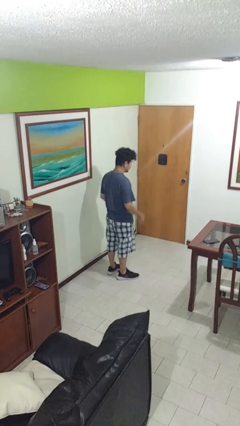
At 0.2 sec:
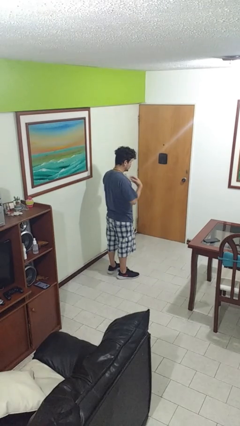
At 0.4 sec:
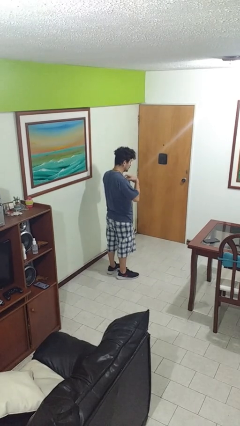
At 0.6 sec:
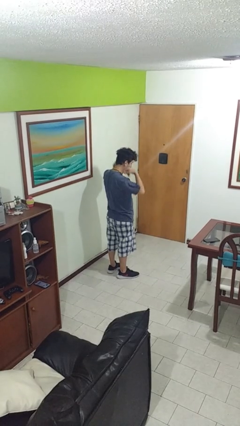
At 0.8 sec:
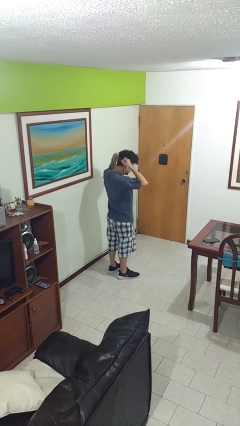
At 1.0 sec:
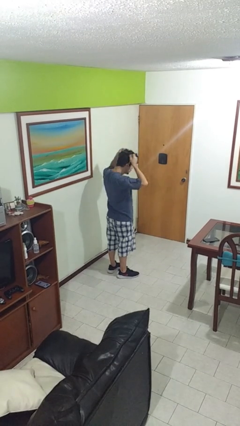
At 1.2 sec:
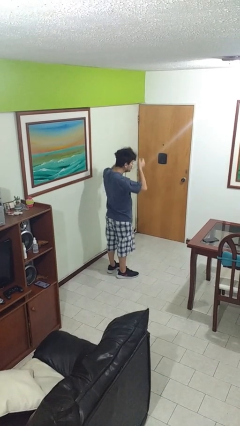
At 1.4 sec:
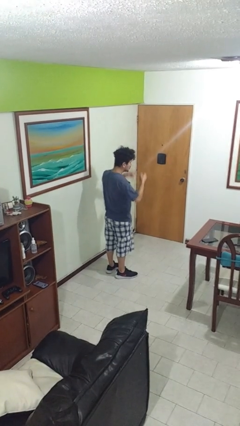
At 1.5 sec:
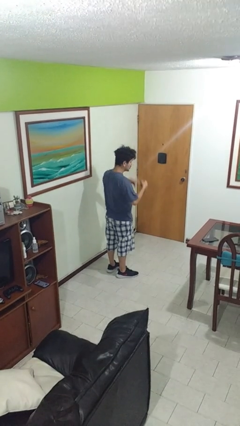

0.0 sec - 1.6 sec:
person takes off necklace

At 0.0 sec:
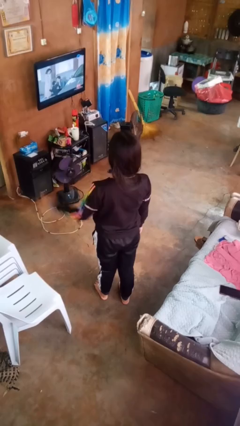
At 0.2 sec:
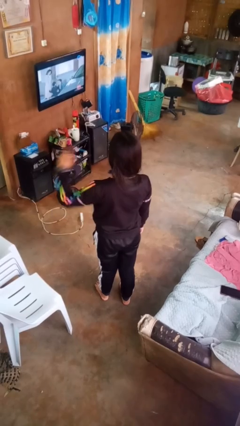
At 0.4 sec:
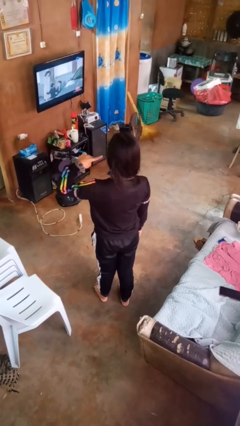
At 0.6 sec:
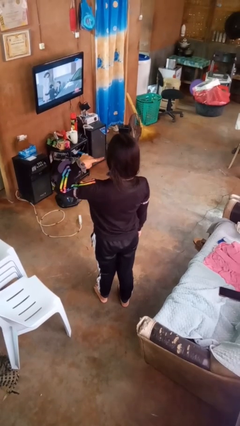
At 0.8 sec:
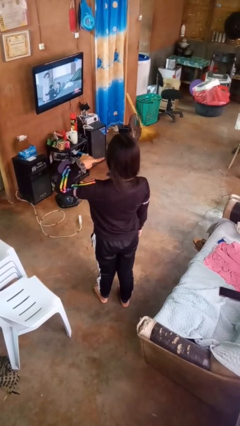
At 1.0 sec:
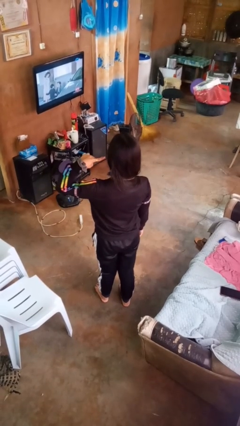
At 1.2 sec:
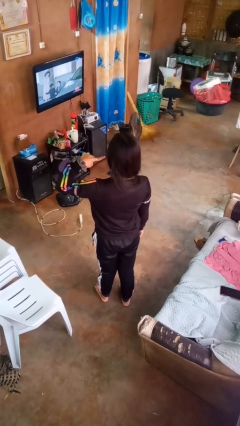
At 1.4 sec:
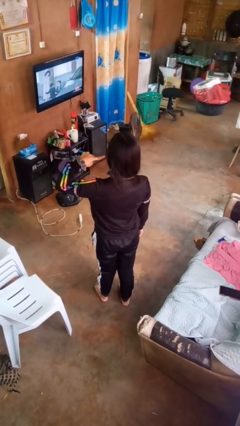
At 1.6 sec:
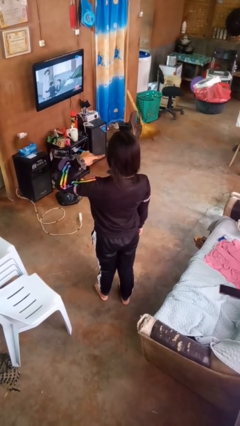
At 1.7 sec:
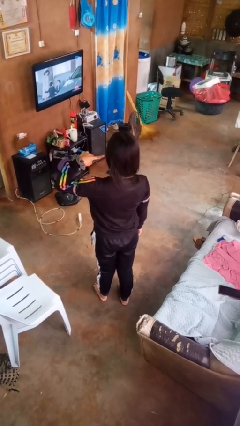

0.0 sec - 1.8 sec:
person gestures listen closely

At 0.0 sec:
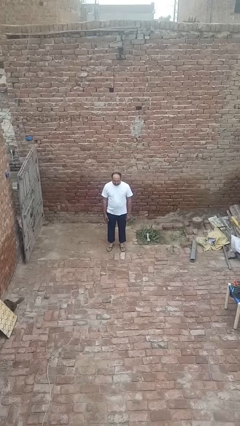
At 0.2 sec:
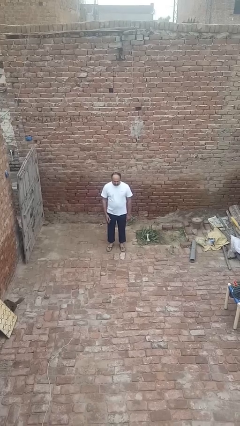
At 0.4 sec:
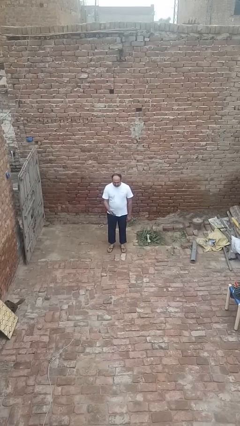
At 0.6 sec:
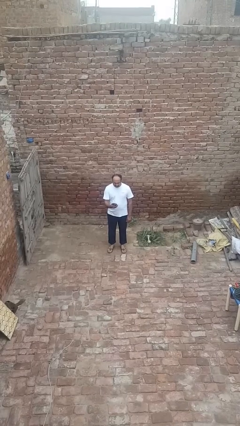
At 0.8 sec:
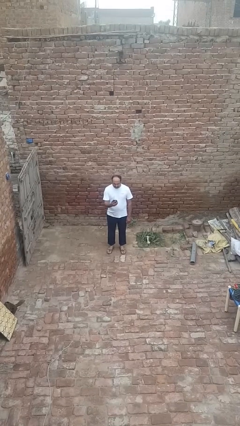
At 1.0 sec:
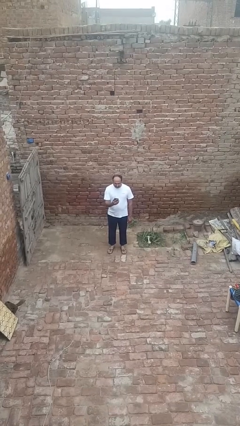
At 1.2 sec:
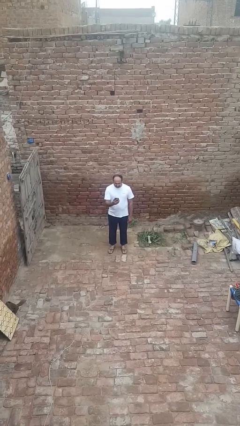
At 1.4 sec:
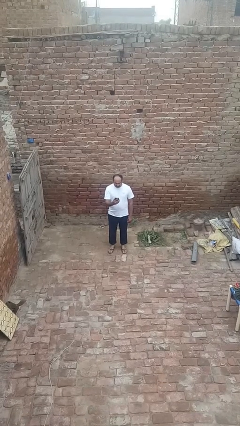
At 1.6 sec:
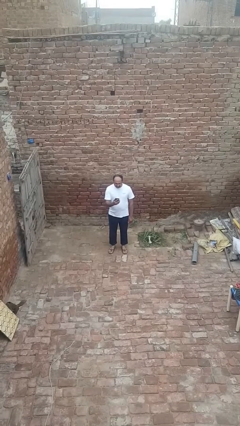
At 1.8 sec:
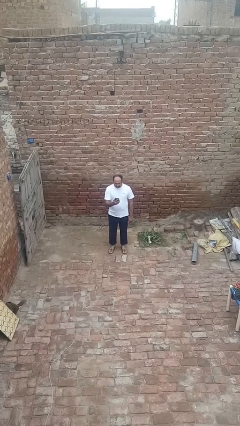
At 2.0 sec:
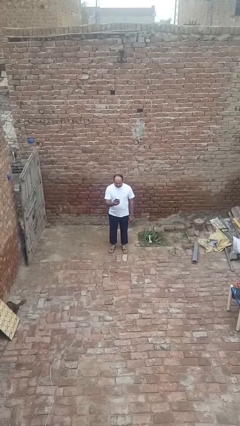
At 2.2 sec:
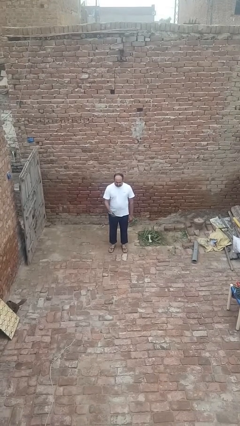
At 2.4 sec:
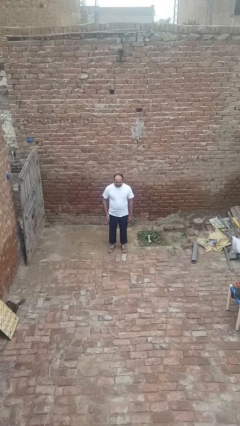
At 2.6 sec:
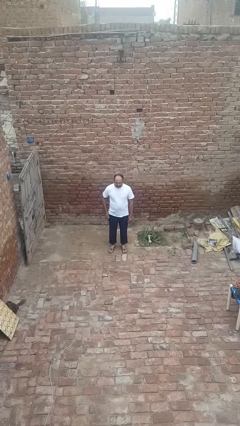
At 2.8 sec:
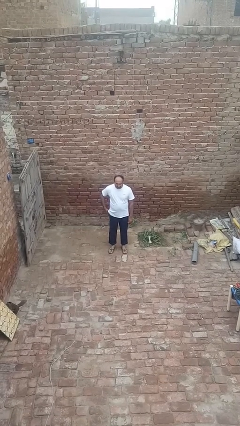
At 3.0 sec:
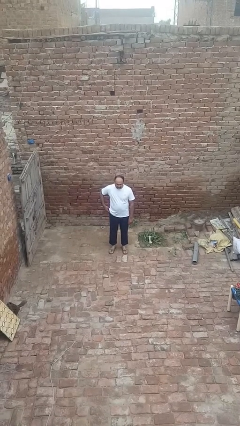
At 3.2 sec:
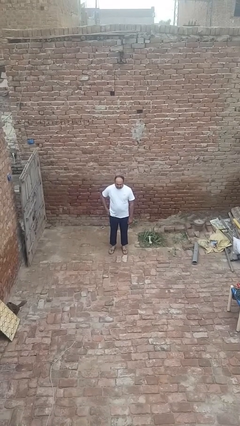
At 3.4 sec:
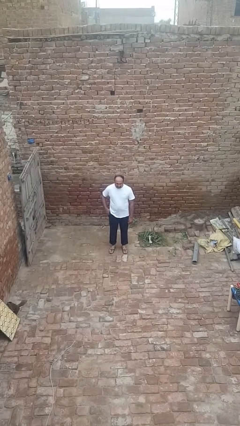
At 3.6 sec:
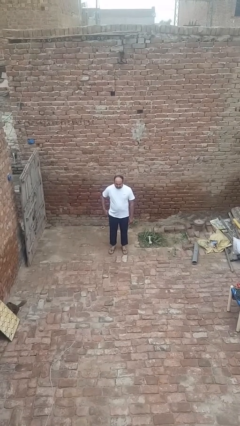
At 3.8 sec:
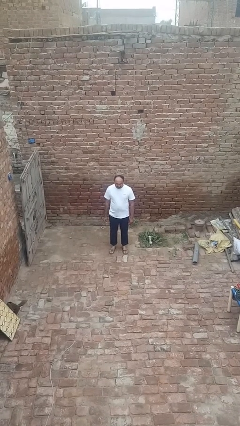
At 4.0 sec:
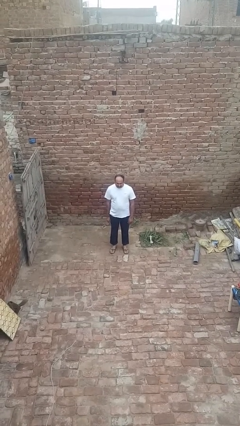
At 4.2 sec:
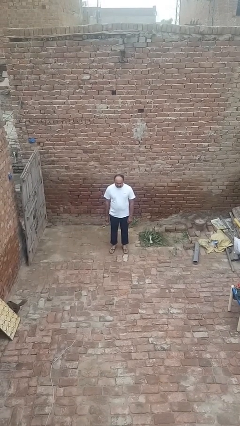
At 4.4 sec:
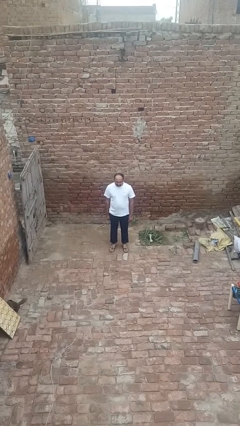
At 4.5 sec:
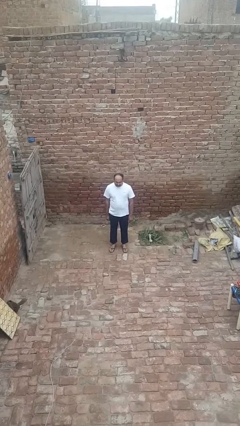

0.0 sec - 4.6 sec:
person puts phone into pocket

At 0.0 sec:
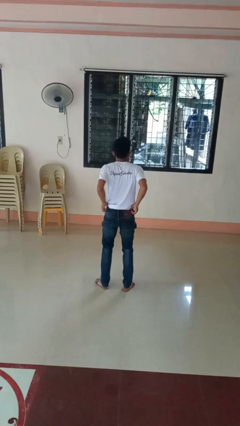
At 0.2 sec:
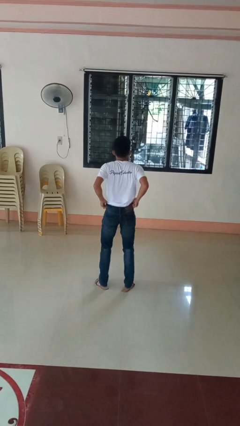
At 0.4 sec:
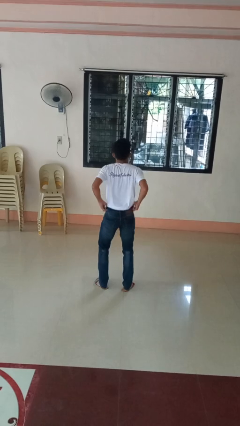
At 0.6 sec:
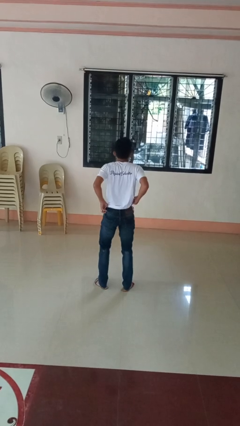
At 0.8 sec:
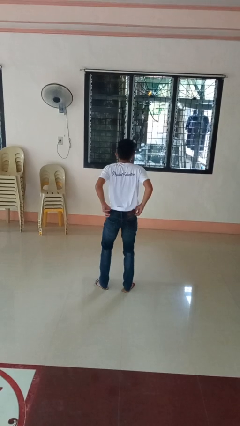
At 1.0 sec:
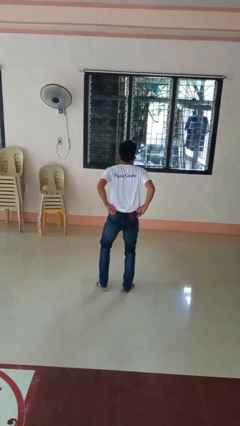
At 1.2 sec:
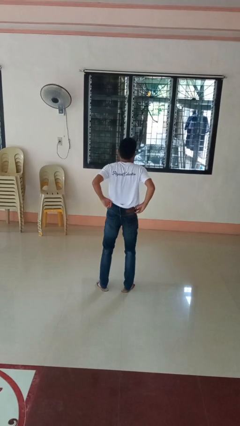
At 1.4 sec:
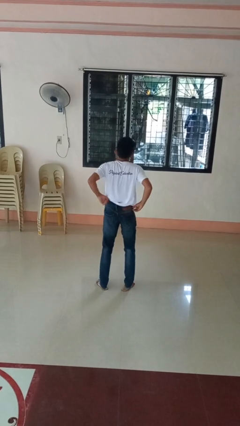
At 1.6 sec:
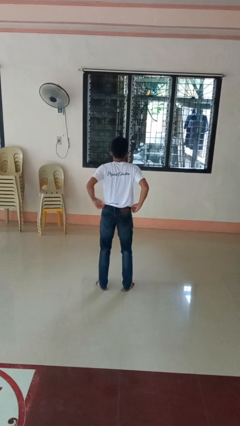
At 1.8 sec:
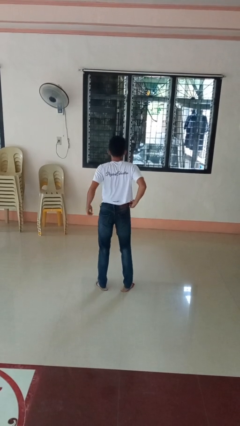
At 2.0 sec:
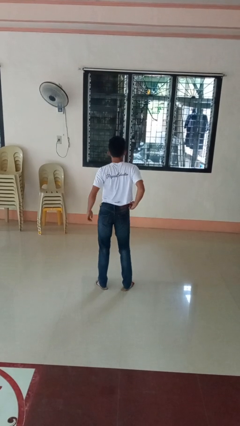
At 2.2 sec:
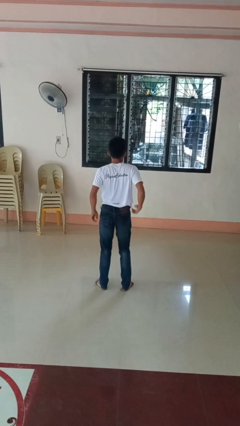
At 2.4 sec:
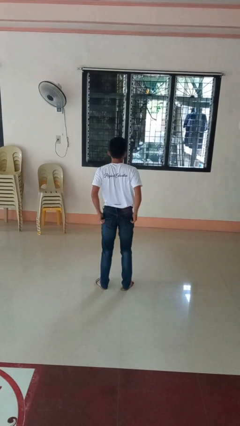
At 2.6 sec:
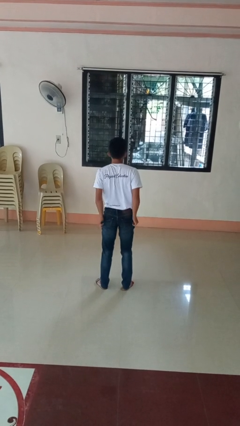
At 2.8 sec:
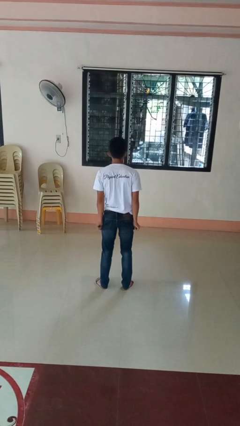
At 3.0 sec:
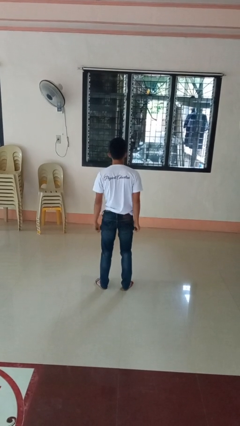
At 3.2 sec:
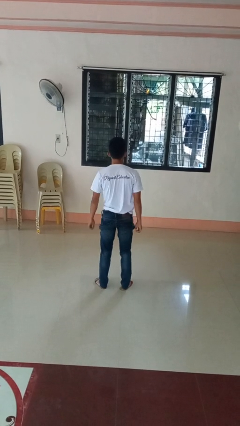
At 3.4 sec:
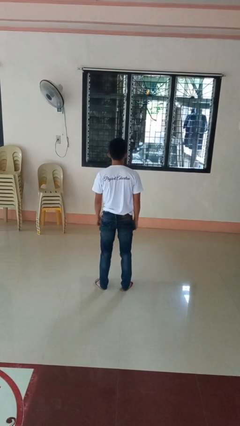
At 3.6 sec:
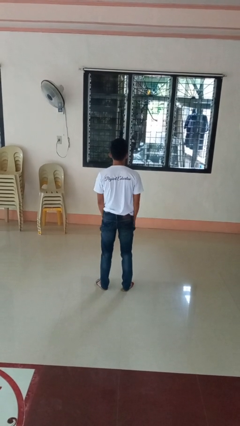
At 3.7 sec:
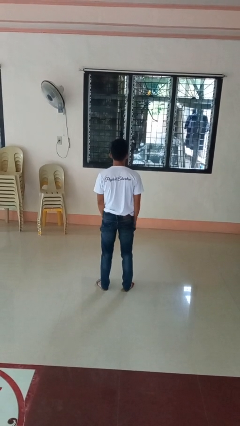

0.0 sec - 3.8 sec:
person hikes up pants

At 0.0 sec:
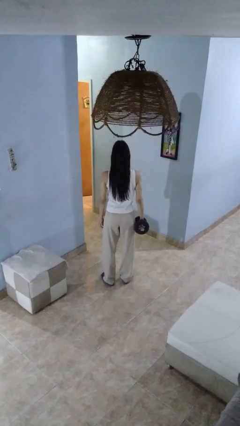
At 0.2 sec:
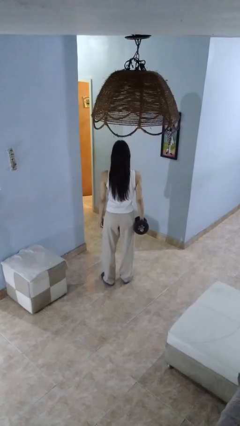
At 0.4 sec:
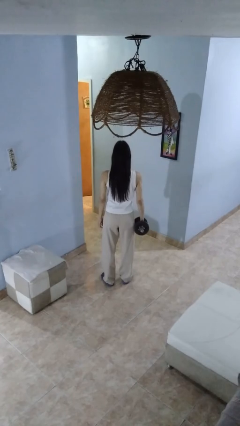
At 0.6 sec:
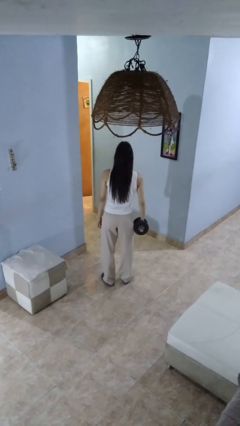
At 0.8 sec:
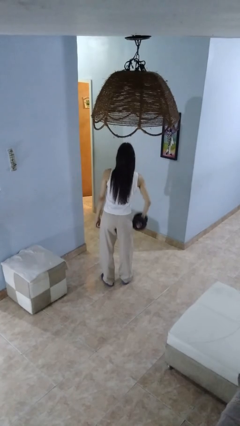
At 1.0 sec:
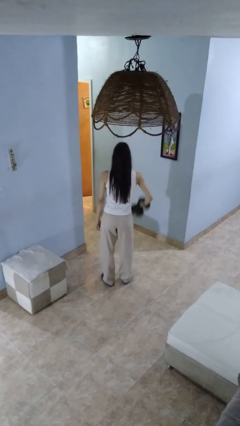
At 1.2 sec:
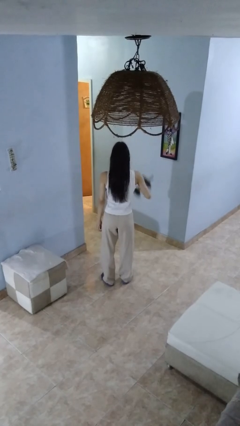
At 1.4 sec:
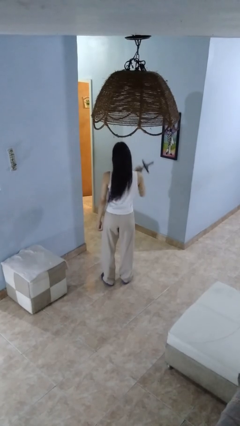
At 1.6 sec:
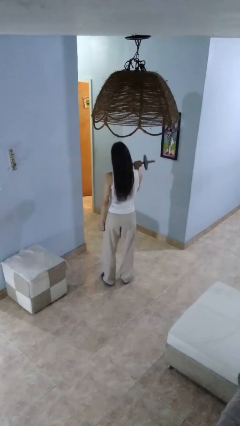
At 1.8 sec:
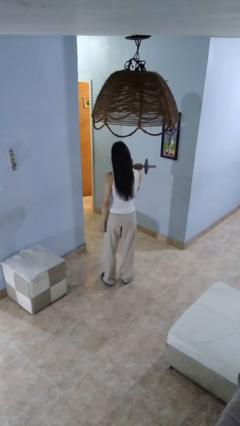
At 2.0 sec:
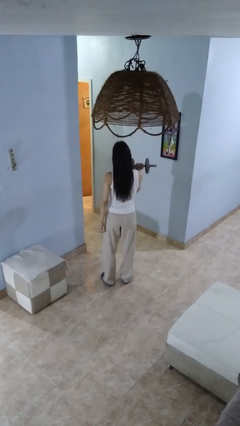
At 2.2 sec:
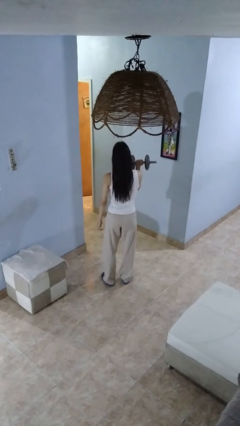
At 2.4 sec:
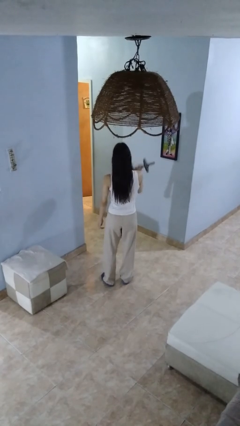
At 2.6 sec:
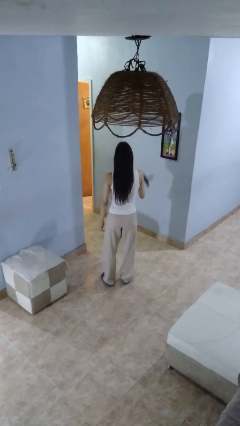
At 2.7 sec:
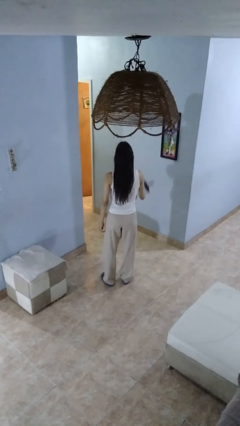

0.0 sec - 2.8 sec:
person lifts dumbbells

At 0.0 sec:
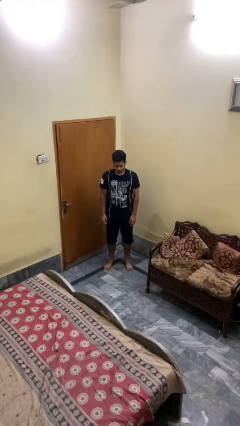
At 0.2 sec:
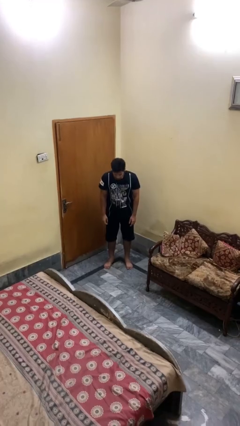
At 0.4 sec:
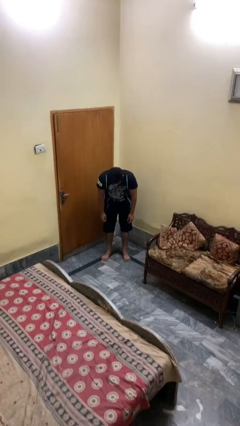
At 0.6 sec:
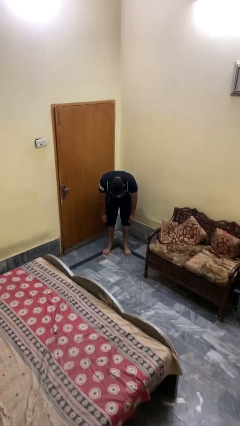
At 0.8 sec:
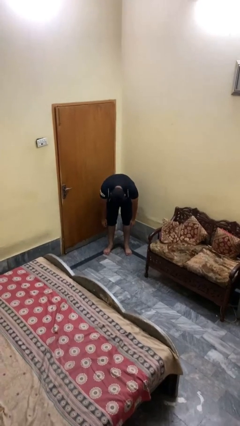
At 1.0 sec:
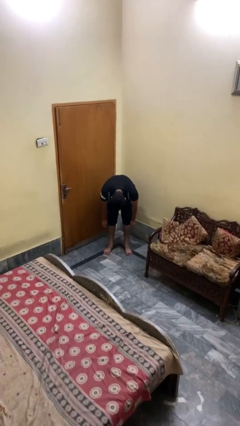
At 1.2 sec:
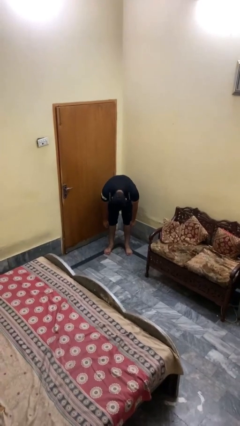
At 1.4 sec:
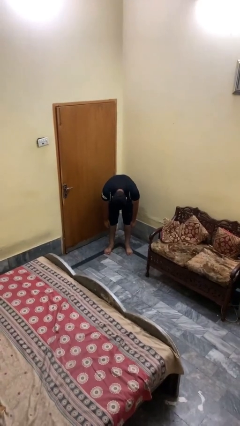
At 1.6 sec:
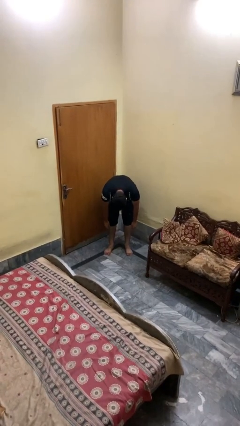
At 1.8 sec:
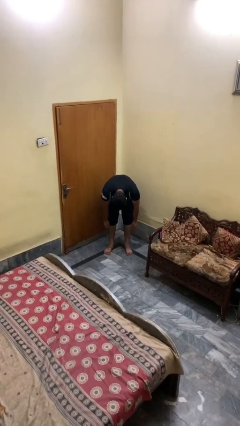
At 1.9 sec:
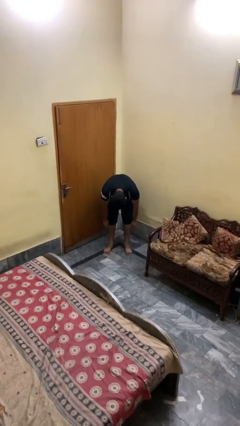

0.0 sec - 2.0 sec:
person bows

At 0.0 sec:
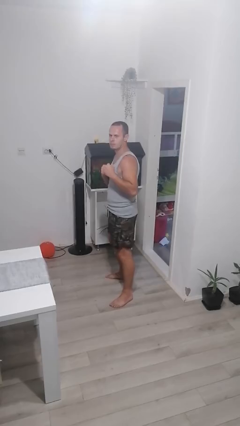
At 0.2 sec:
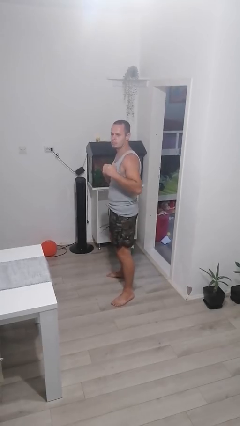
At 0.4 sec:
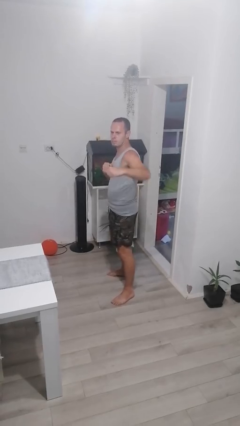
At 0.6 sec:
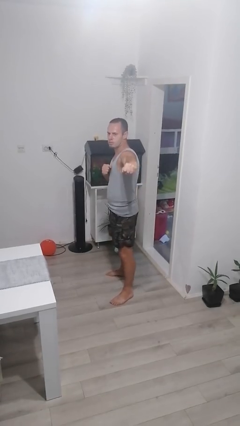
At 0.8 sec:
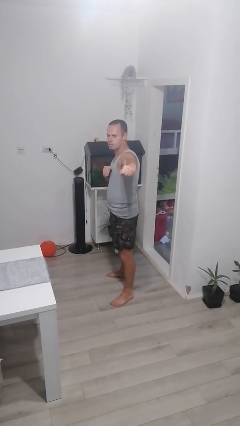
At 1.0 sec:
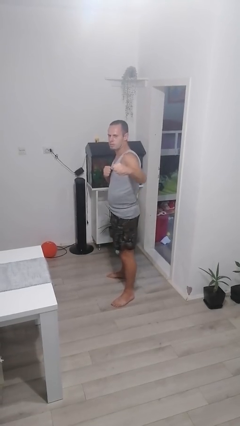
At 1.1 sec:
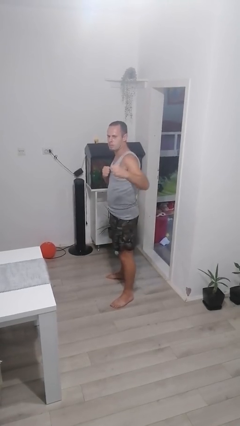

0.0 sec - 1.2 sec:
person karate chop
